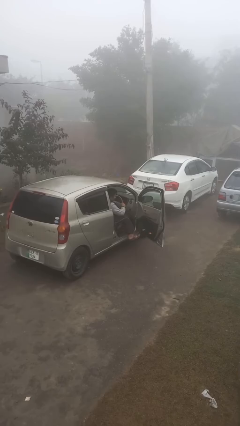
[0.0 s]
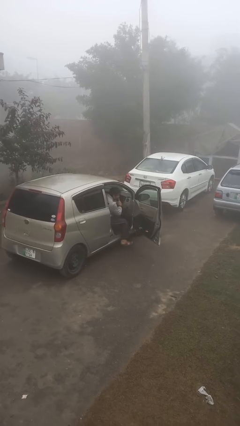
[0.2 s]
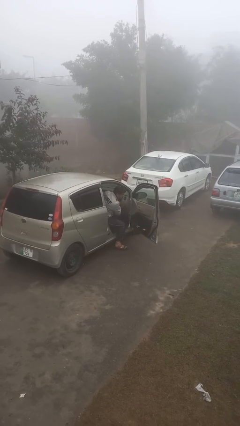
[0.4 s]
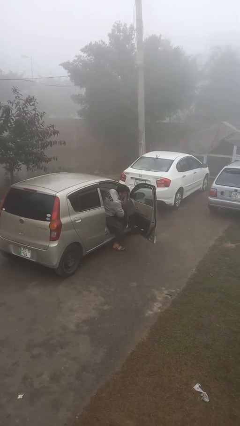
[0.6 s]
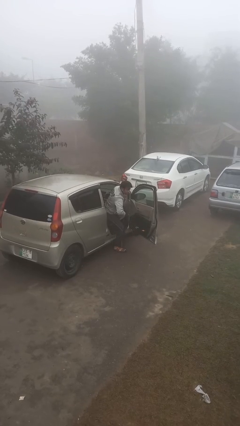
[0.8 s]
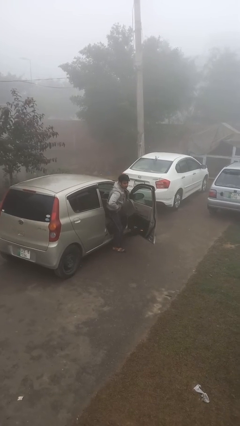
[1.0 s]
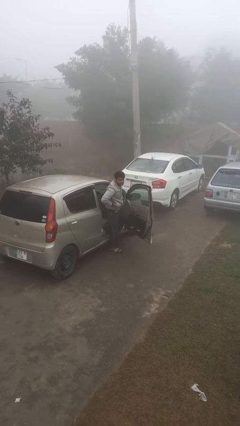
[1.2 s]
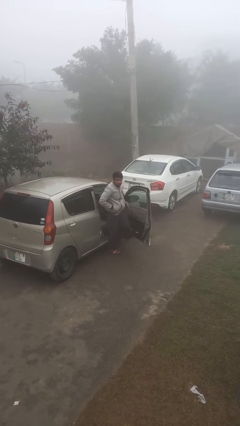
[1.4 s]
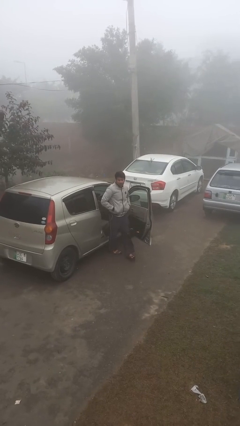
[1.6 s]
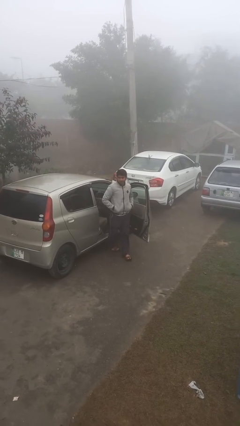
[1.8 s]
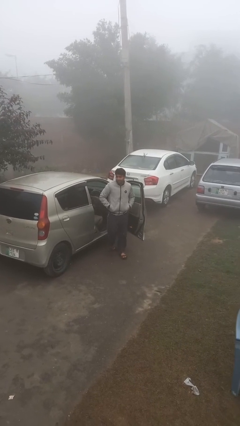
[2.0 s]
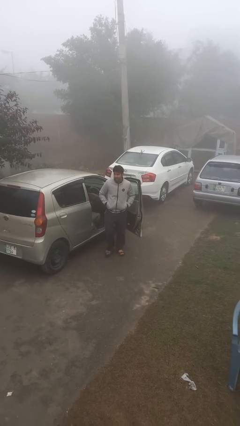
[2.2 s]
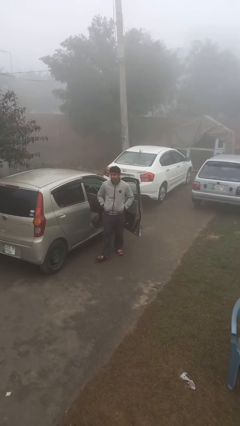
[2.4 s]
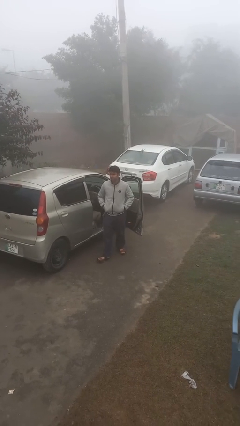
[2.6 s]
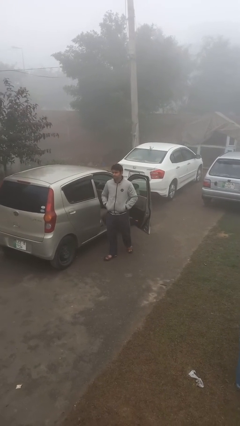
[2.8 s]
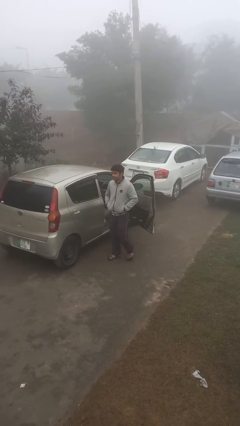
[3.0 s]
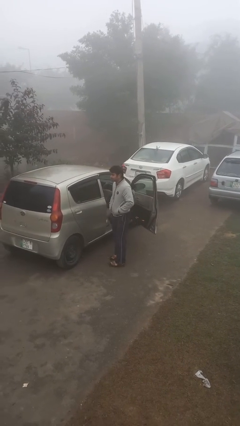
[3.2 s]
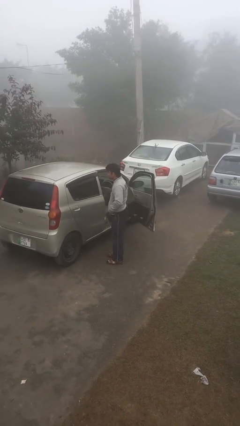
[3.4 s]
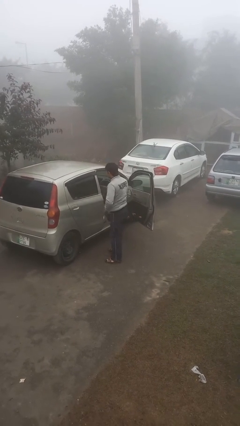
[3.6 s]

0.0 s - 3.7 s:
person exits car

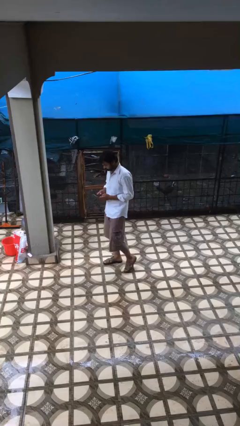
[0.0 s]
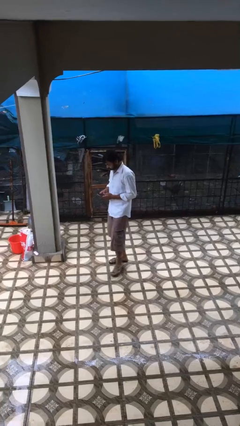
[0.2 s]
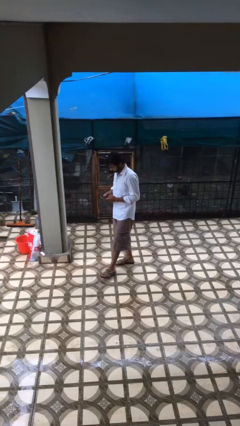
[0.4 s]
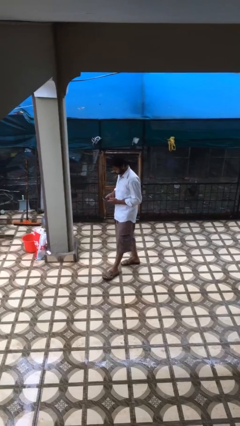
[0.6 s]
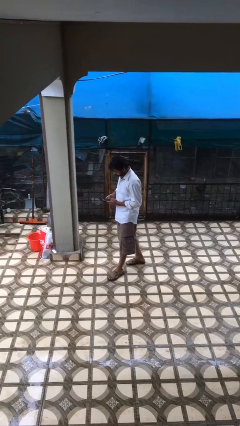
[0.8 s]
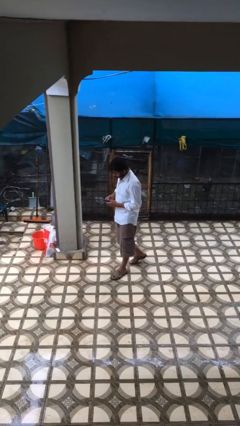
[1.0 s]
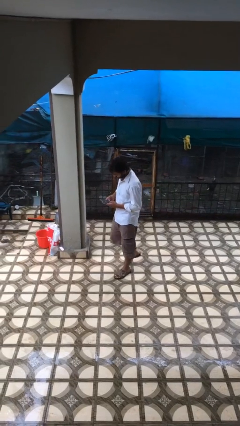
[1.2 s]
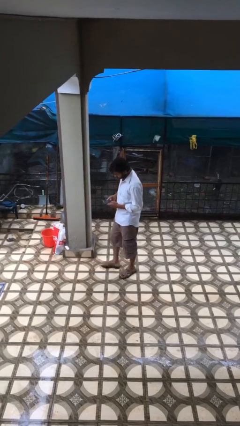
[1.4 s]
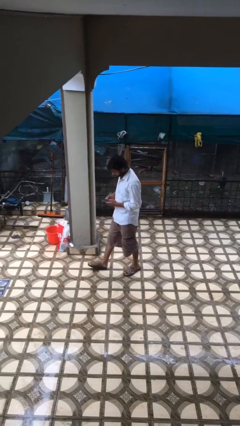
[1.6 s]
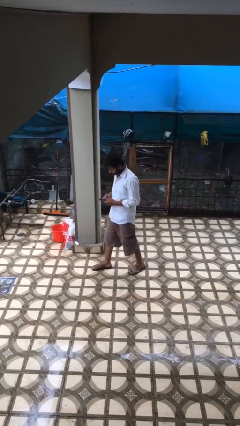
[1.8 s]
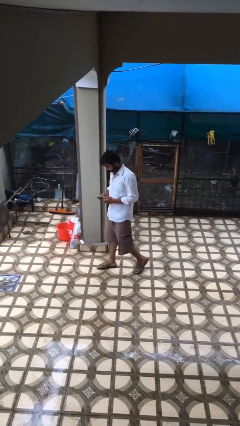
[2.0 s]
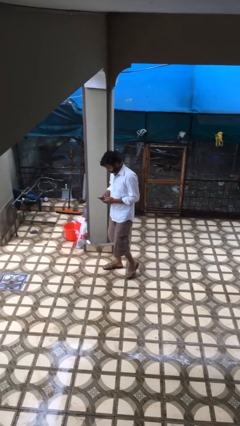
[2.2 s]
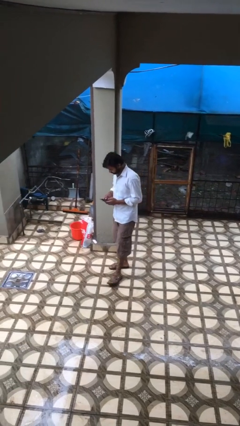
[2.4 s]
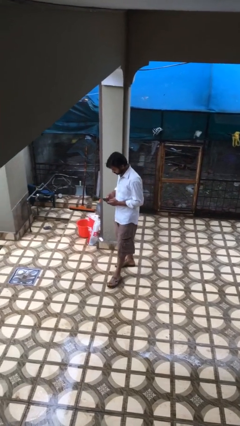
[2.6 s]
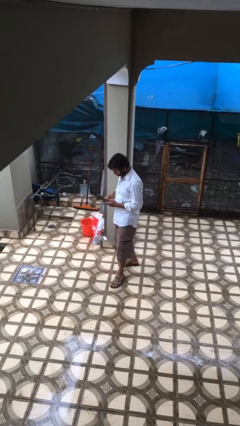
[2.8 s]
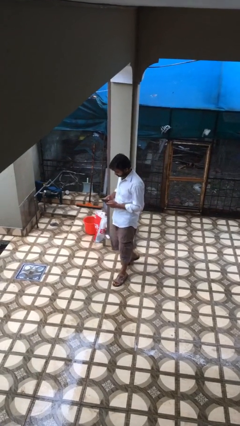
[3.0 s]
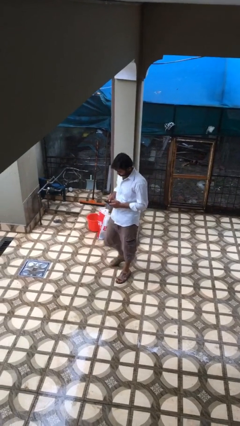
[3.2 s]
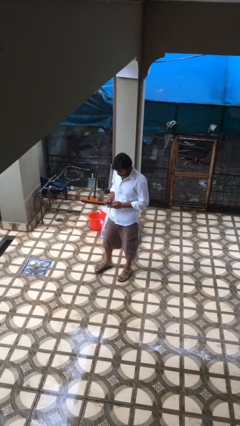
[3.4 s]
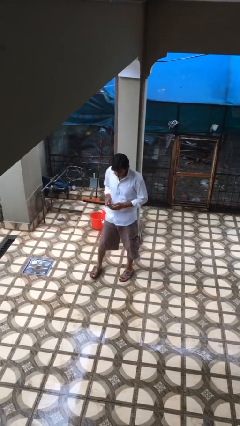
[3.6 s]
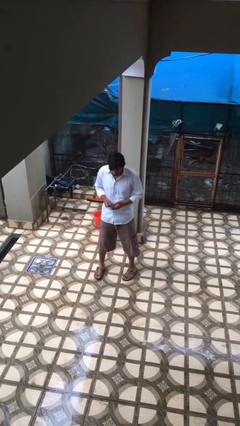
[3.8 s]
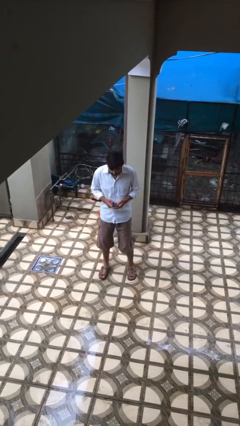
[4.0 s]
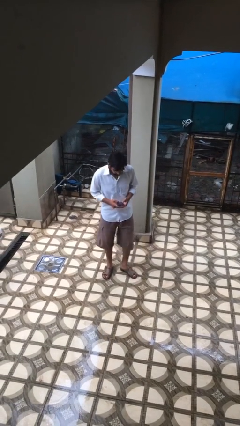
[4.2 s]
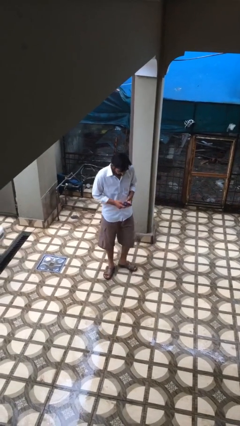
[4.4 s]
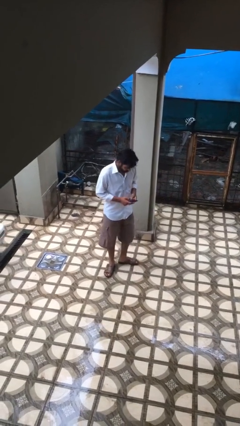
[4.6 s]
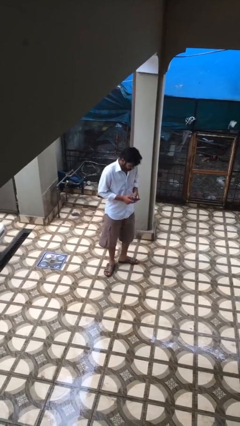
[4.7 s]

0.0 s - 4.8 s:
person texts on phone

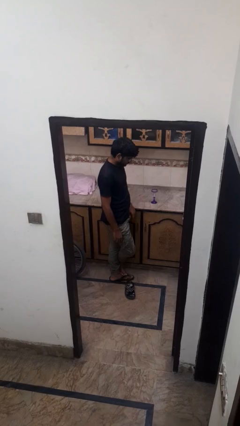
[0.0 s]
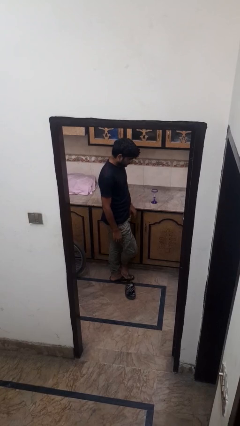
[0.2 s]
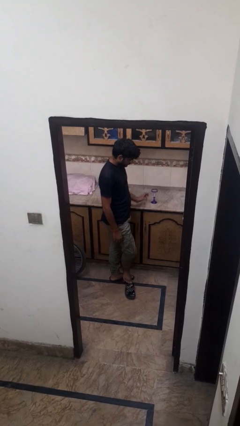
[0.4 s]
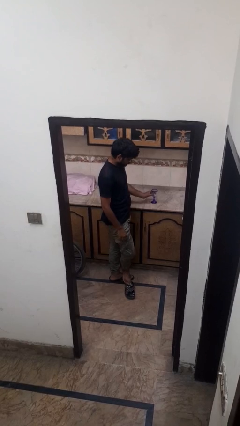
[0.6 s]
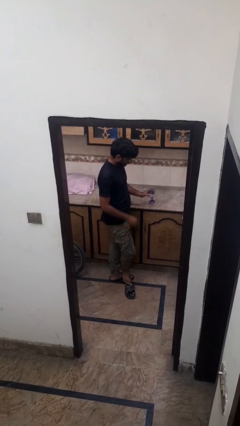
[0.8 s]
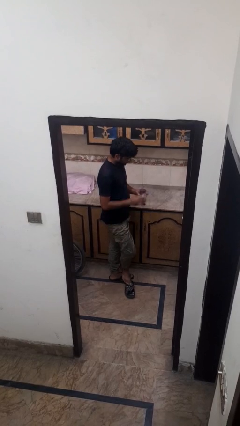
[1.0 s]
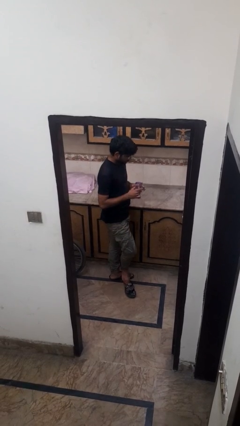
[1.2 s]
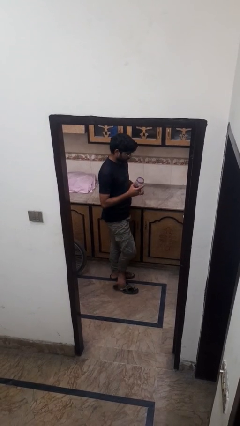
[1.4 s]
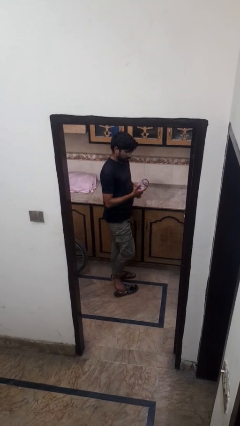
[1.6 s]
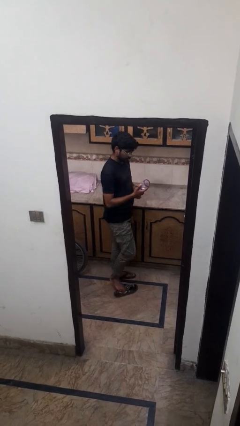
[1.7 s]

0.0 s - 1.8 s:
person picks up object from countertop

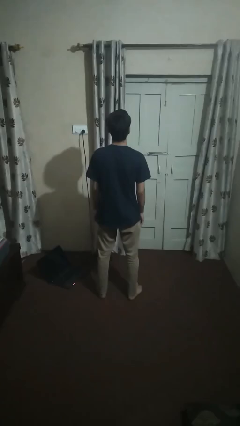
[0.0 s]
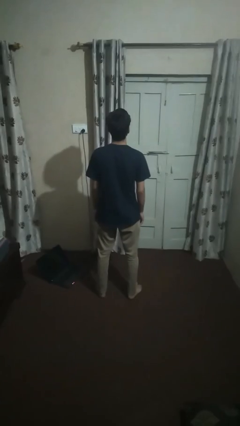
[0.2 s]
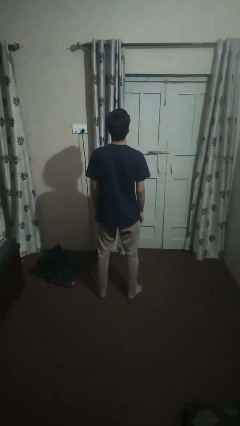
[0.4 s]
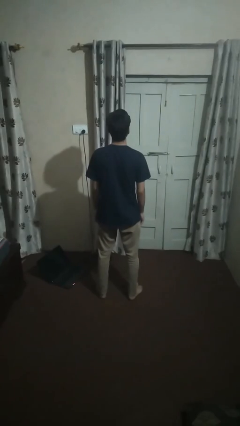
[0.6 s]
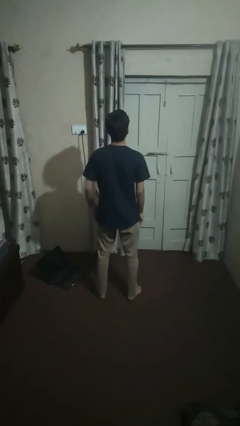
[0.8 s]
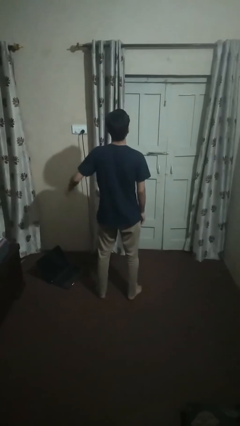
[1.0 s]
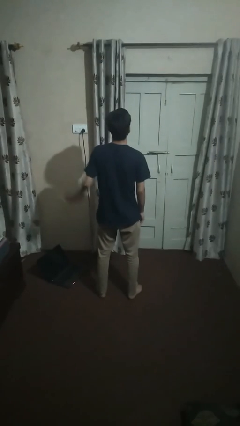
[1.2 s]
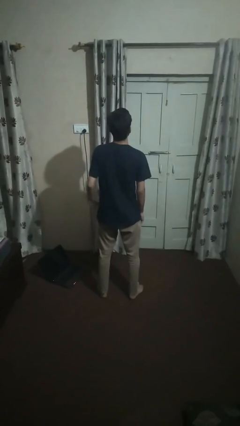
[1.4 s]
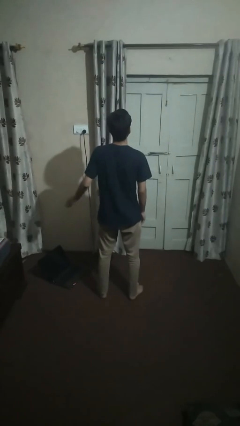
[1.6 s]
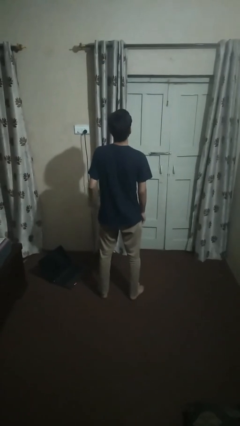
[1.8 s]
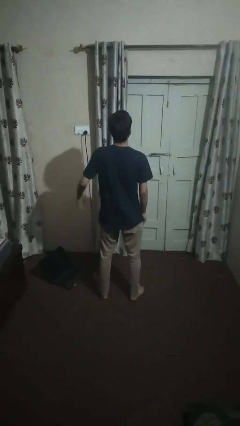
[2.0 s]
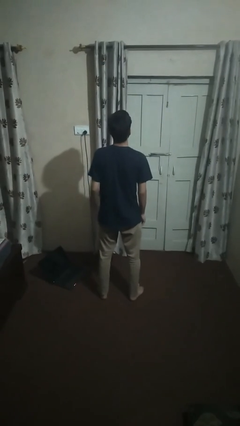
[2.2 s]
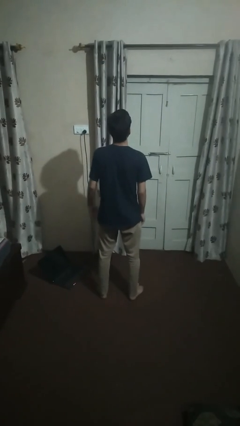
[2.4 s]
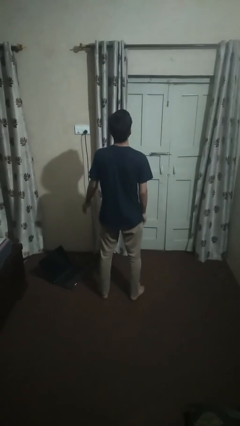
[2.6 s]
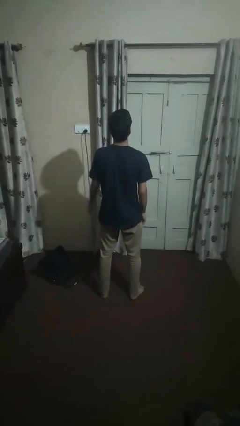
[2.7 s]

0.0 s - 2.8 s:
person slaps hands on thighs

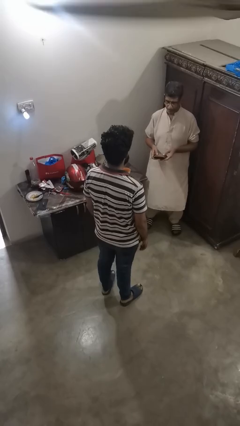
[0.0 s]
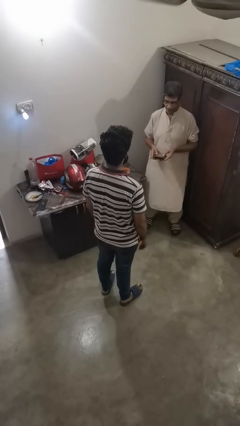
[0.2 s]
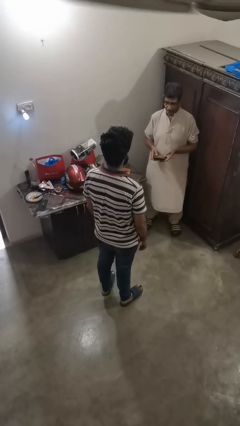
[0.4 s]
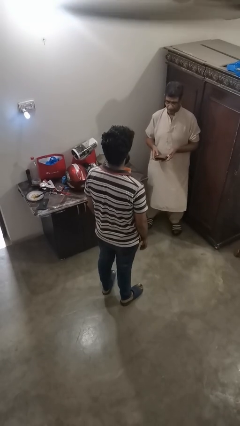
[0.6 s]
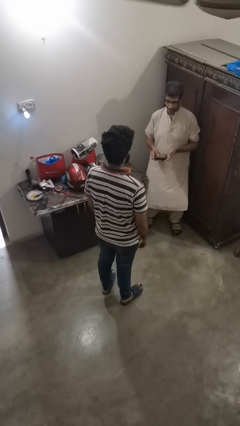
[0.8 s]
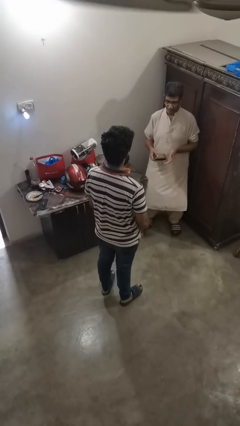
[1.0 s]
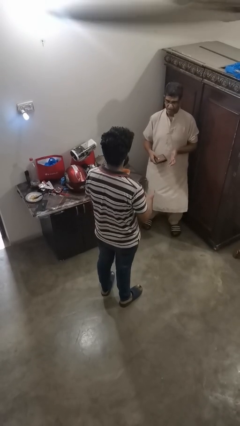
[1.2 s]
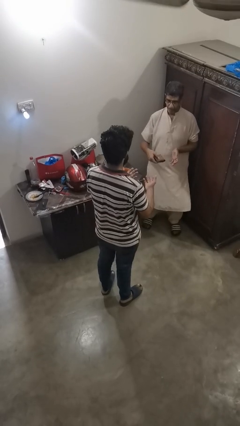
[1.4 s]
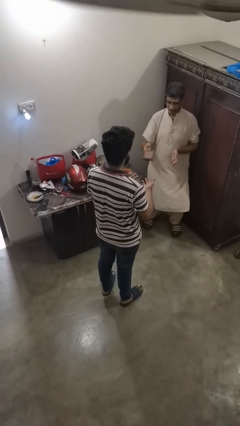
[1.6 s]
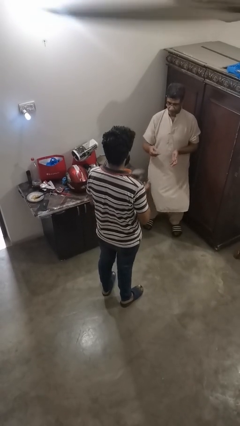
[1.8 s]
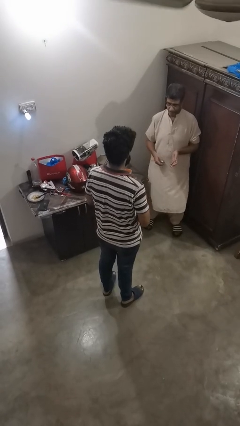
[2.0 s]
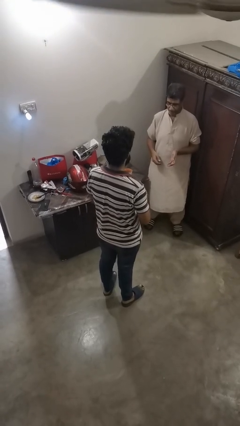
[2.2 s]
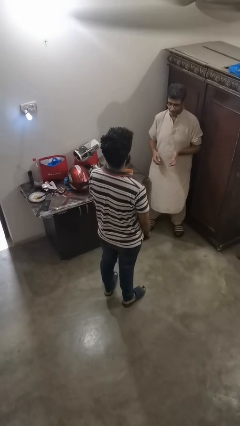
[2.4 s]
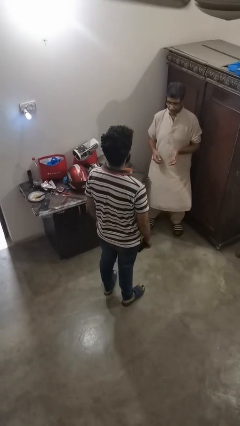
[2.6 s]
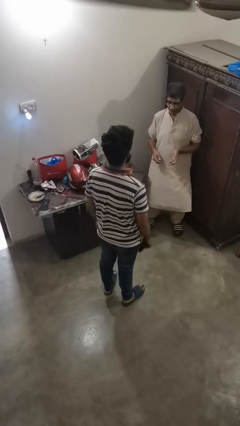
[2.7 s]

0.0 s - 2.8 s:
person catches object from person

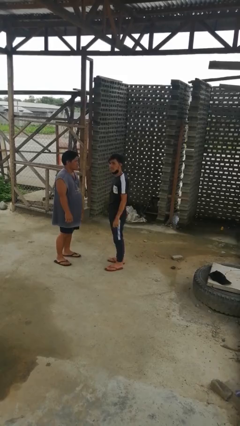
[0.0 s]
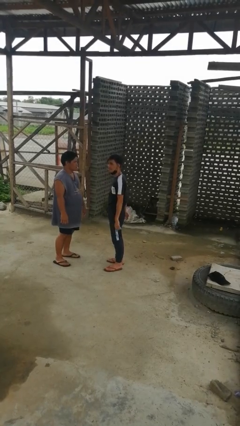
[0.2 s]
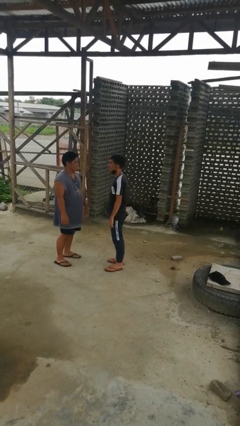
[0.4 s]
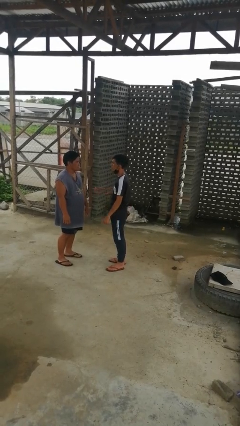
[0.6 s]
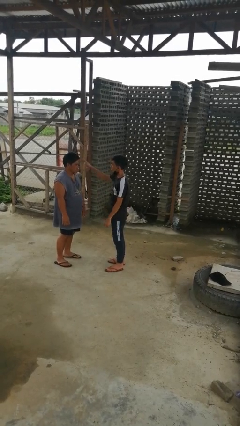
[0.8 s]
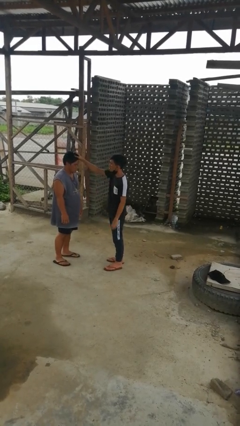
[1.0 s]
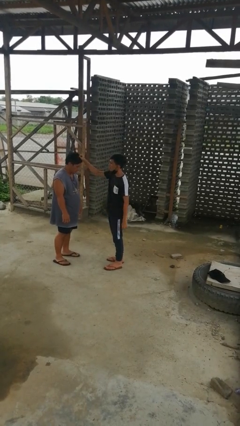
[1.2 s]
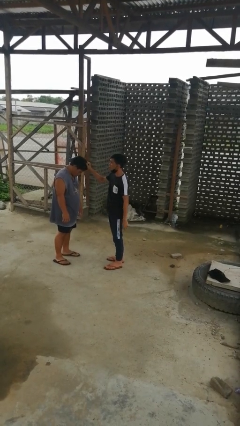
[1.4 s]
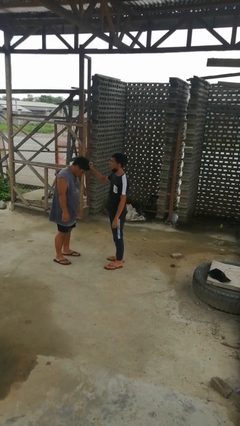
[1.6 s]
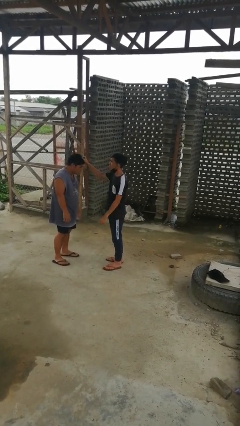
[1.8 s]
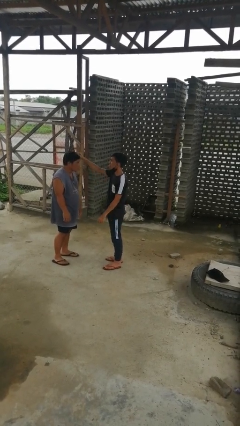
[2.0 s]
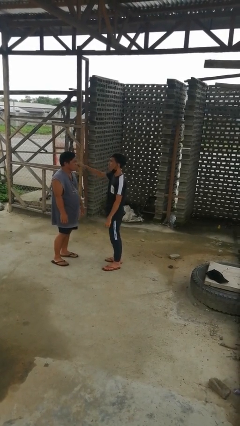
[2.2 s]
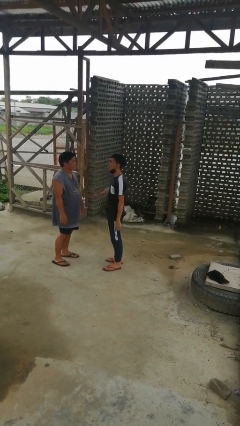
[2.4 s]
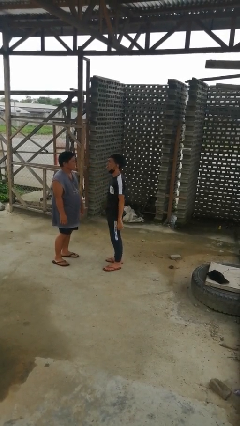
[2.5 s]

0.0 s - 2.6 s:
person grabs person by hair
